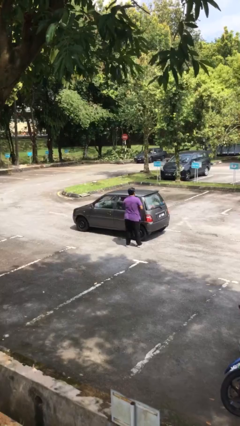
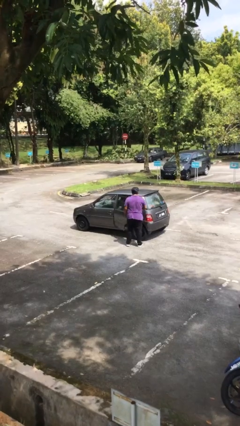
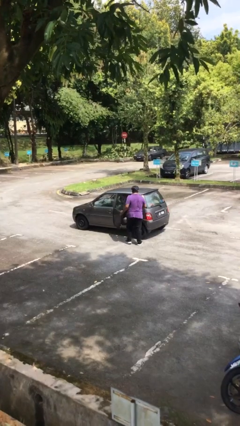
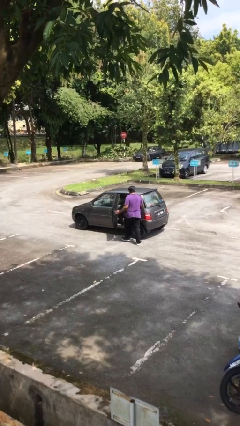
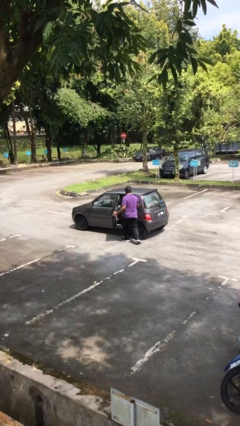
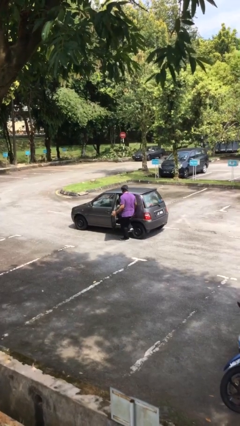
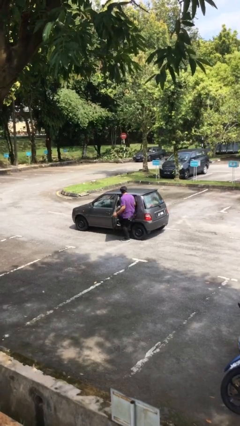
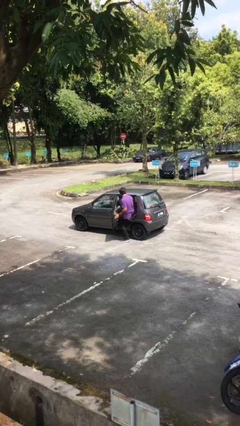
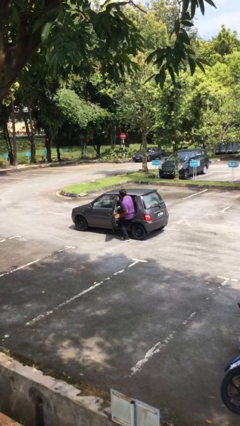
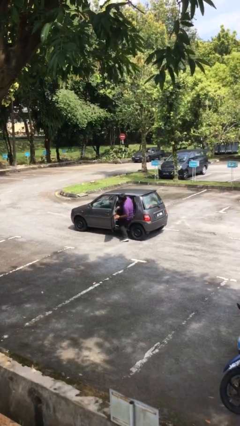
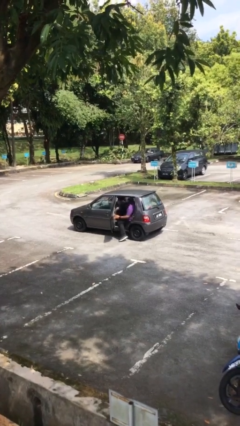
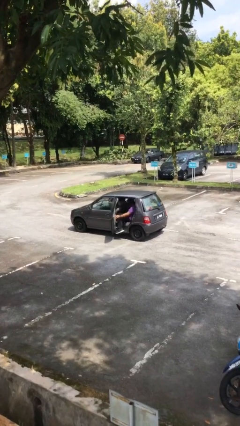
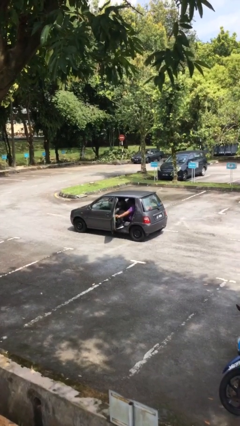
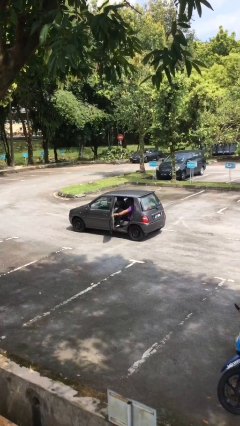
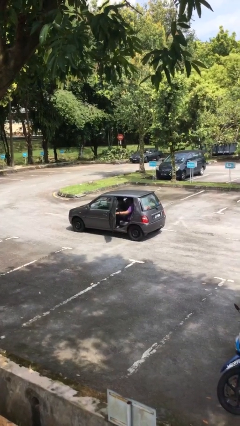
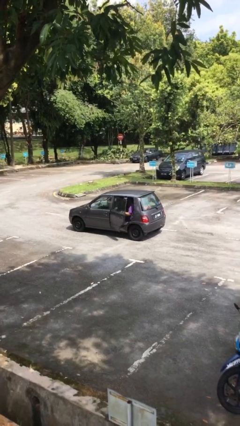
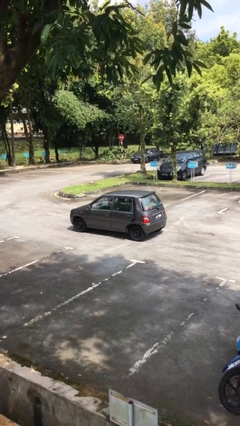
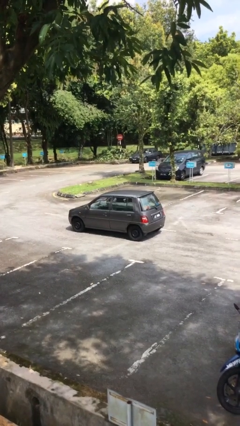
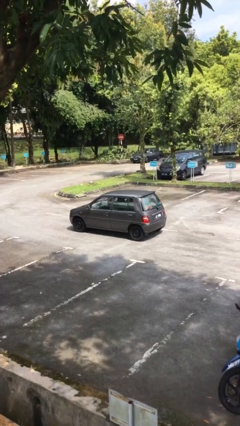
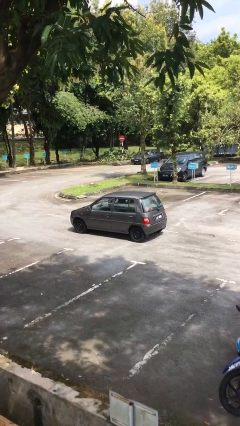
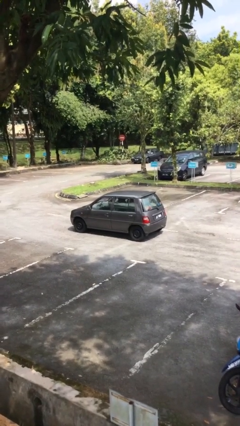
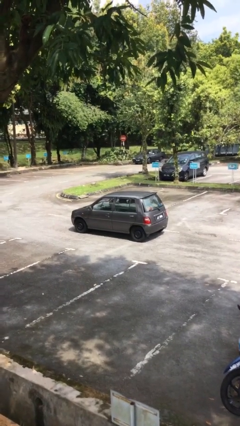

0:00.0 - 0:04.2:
car picks up person

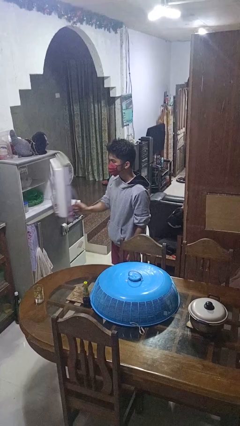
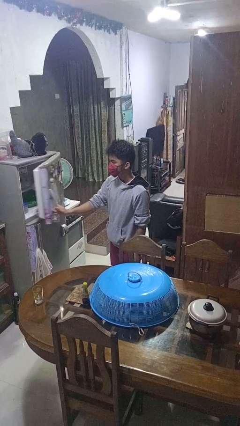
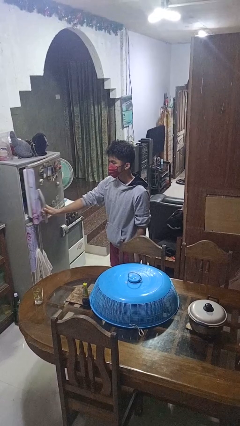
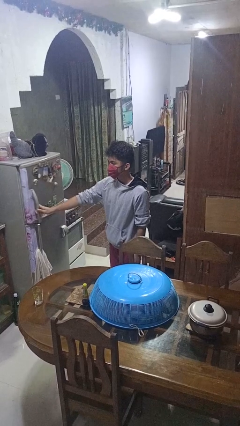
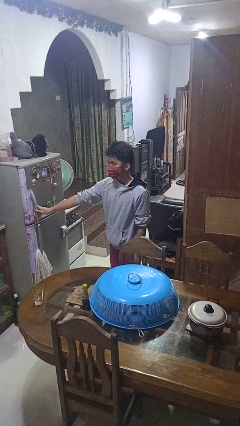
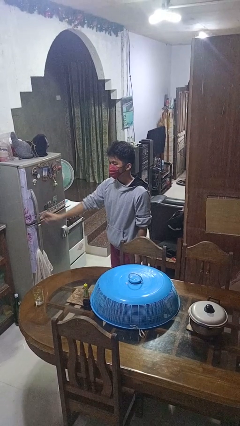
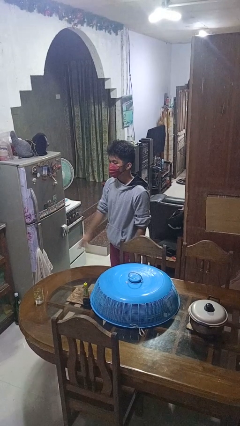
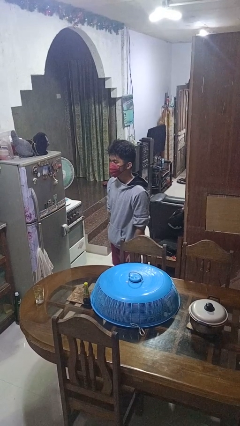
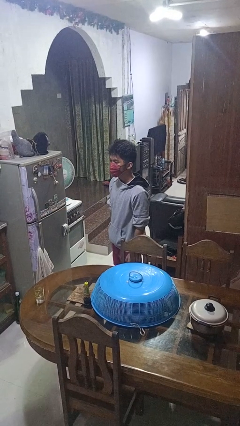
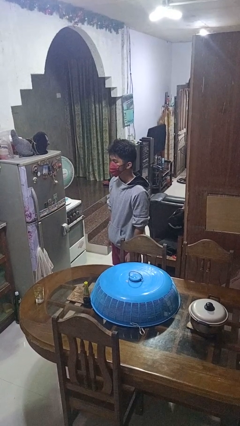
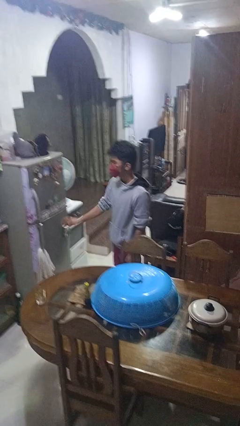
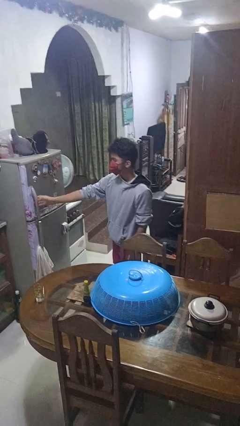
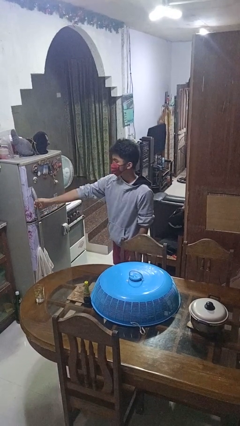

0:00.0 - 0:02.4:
person closes refrigerator

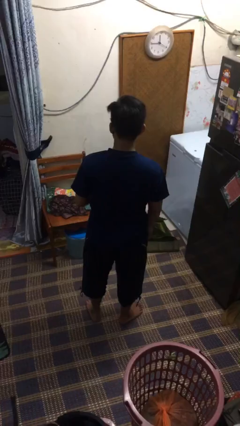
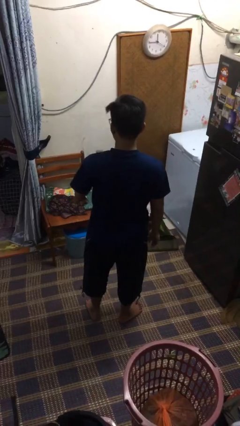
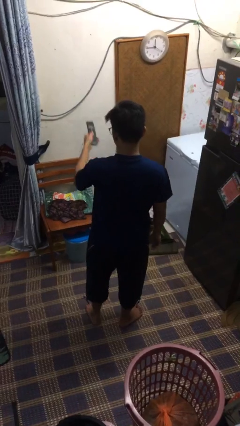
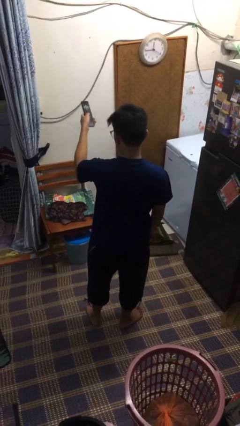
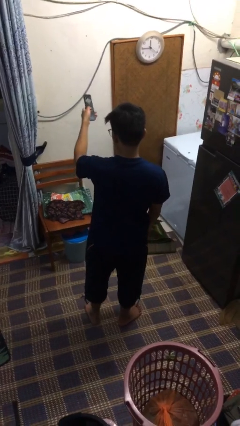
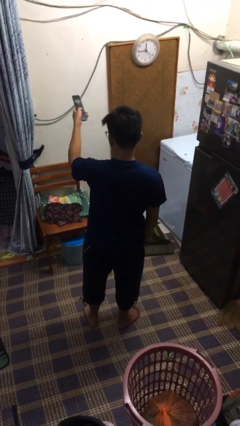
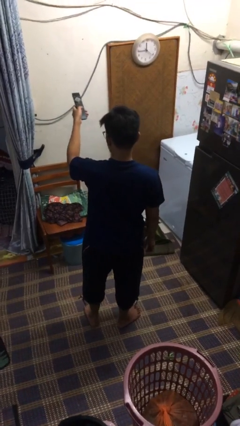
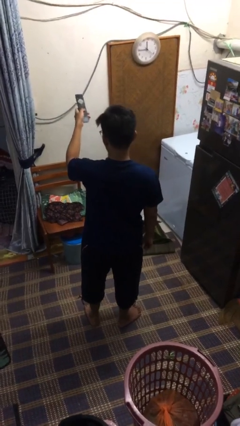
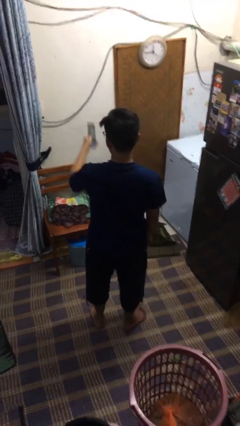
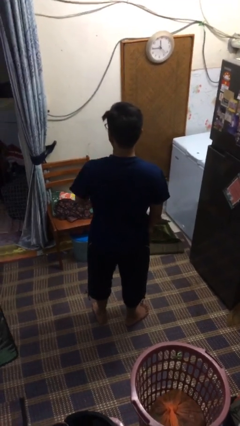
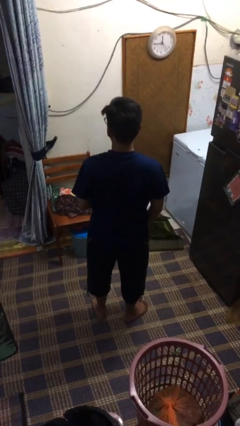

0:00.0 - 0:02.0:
person uses television remote

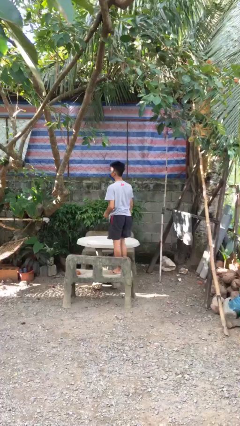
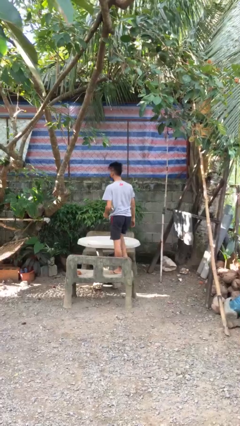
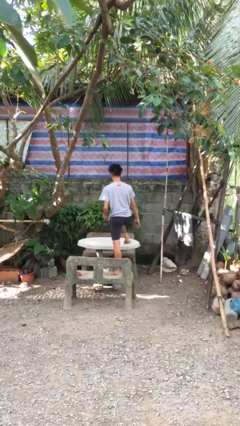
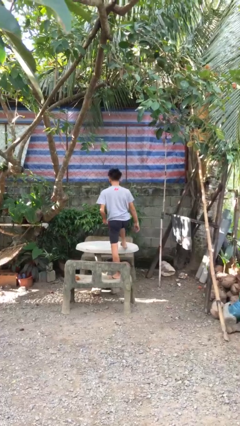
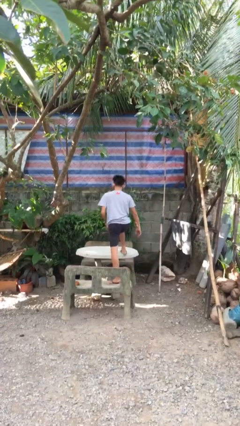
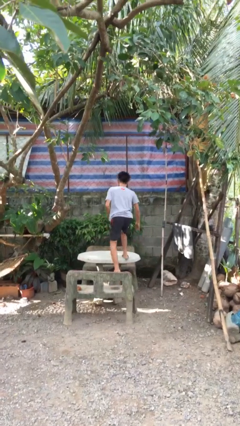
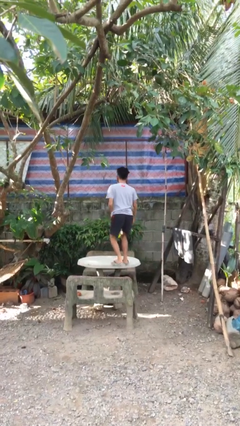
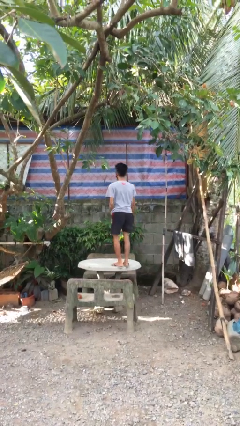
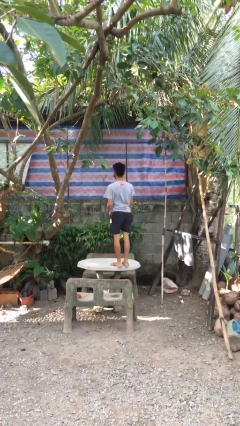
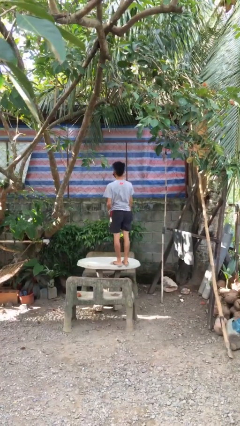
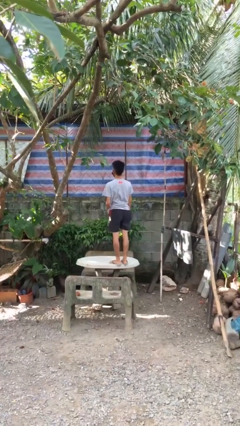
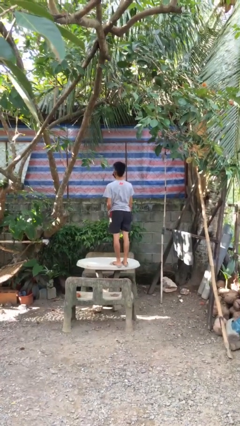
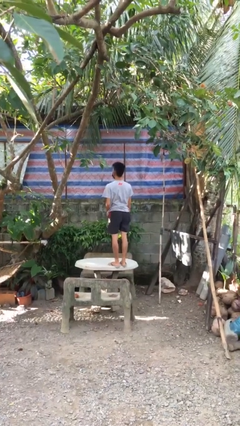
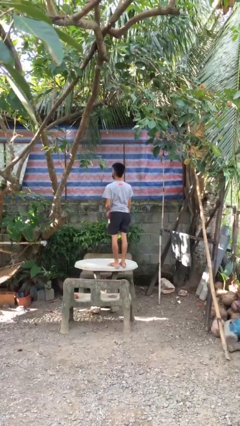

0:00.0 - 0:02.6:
person climbs on table

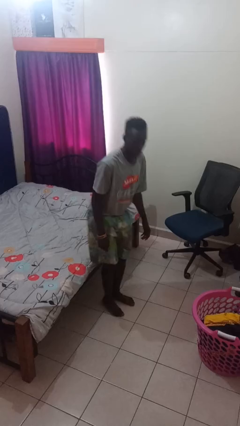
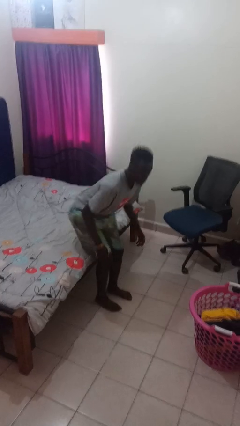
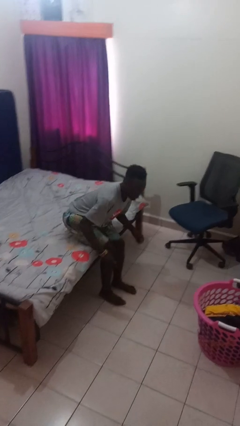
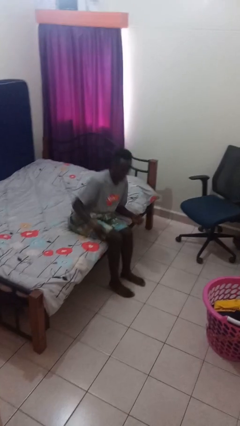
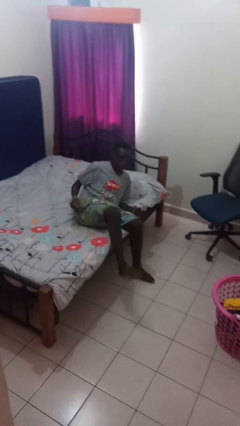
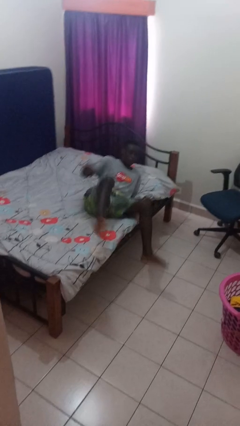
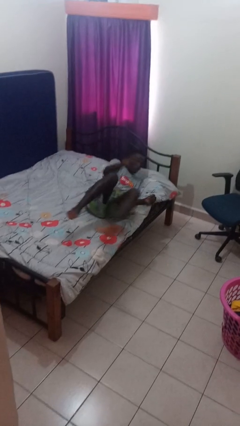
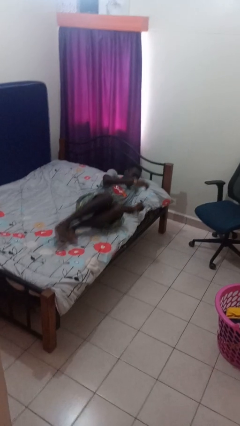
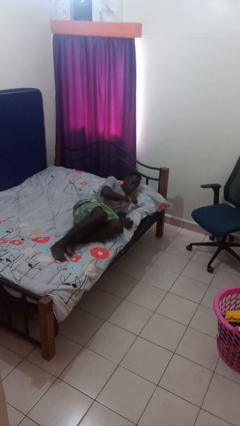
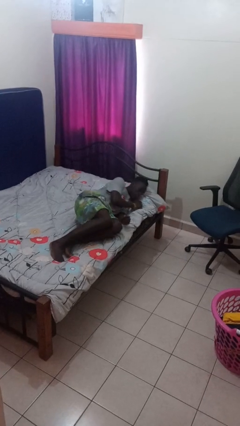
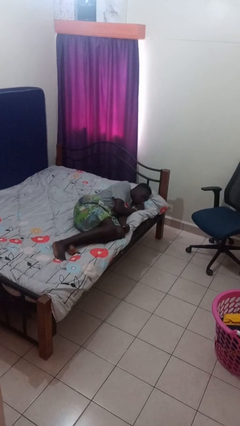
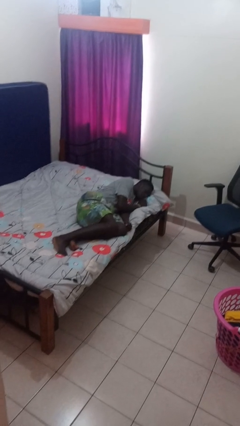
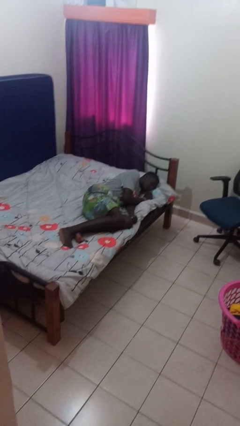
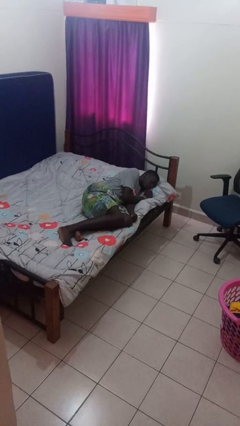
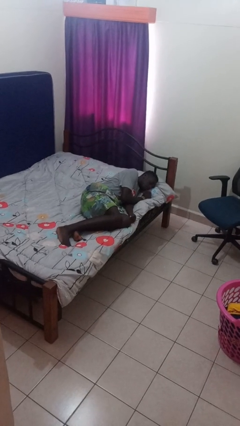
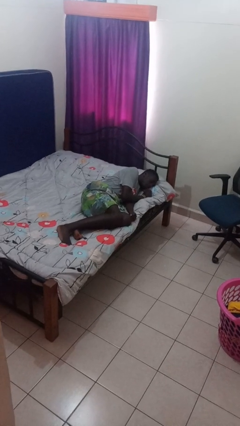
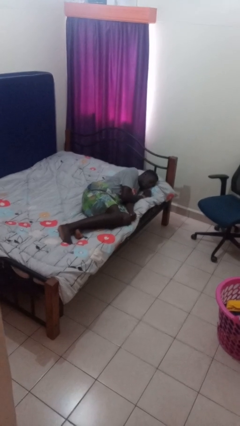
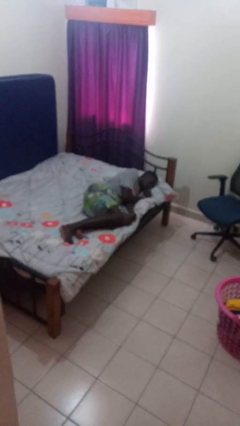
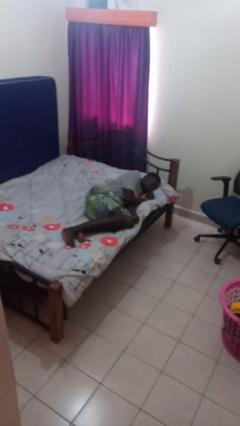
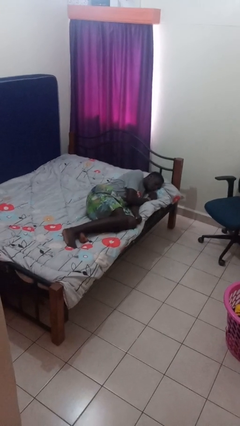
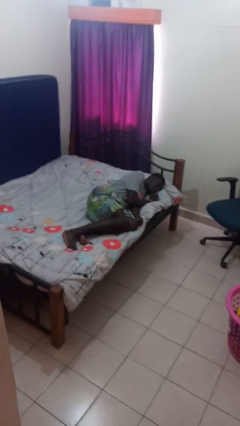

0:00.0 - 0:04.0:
person lies down on bed

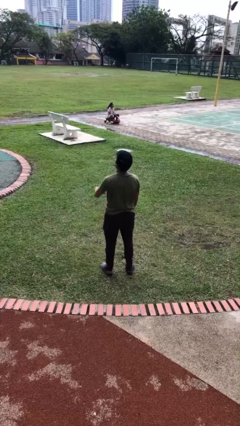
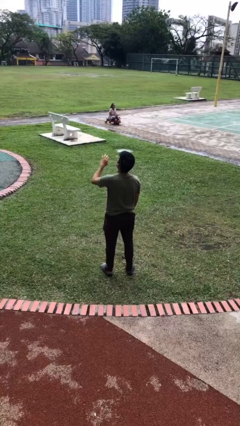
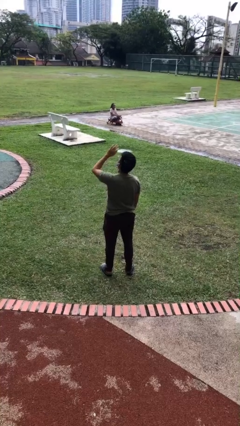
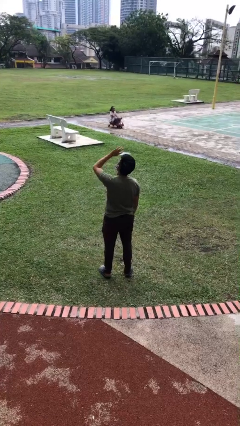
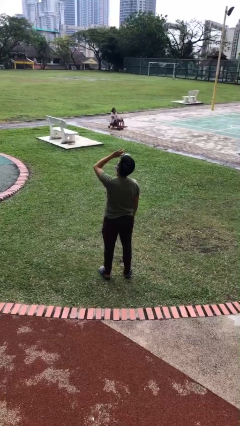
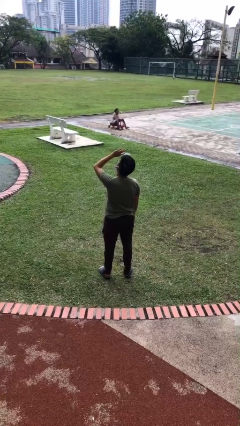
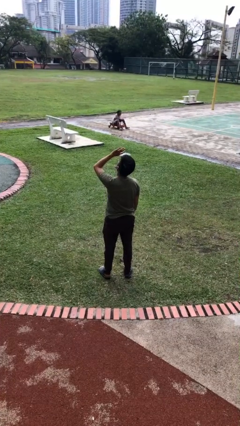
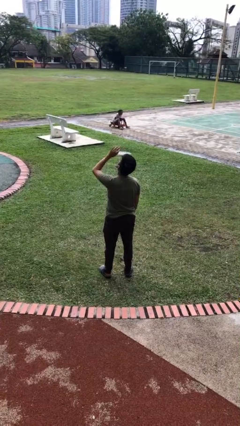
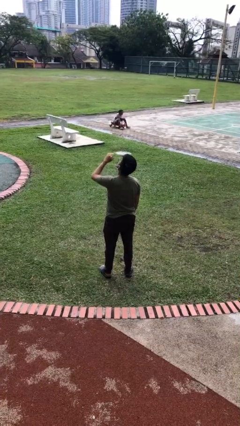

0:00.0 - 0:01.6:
person shades eyes

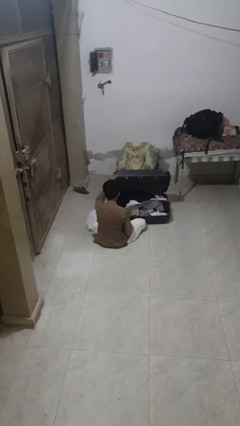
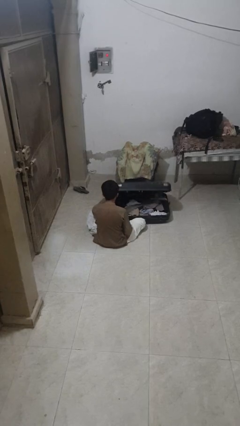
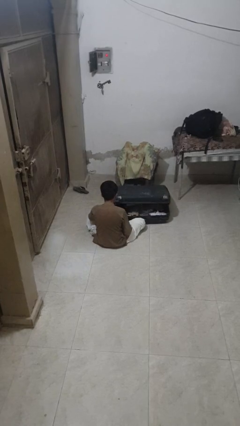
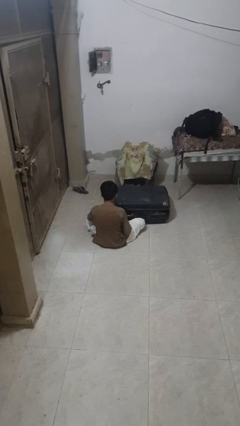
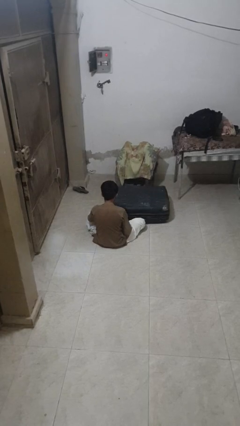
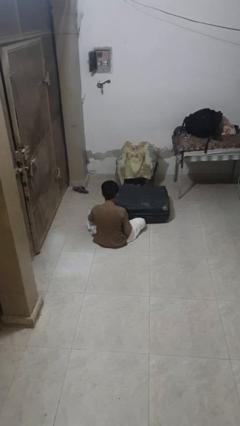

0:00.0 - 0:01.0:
person closes suitcase
